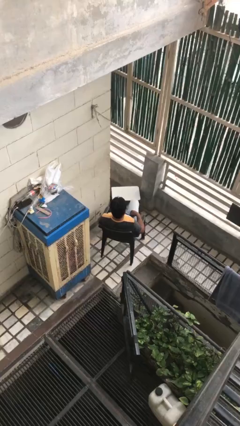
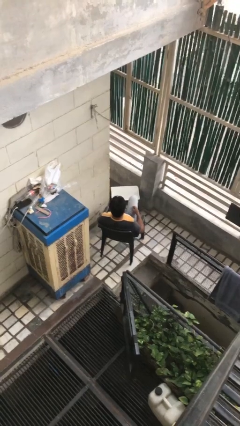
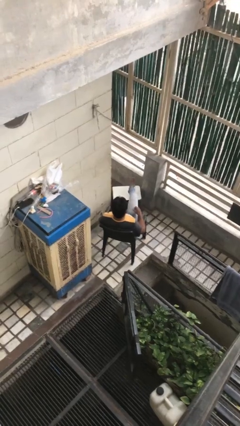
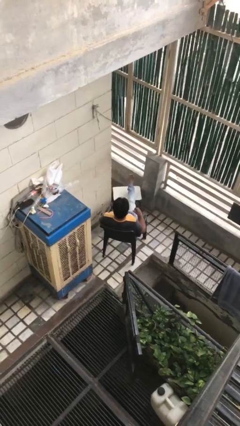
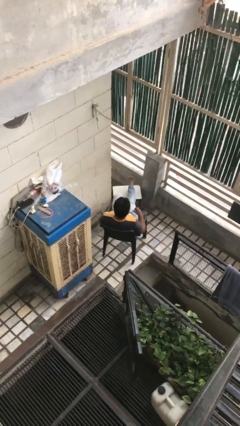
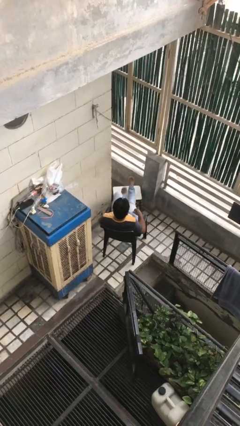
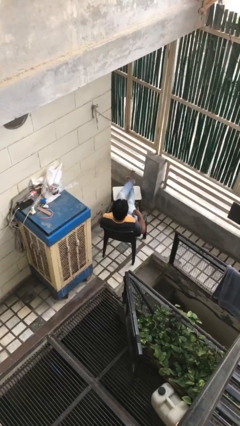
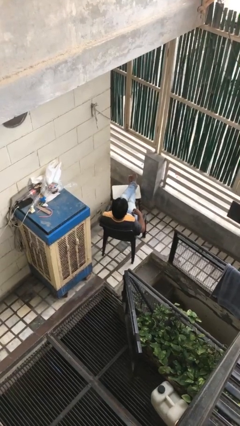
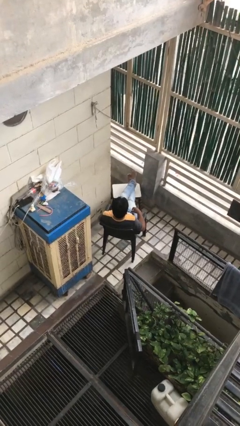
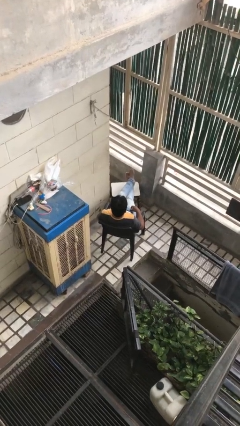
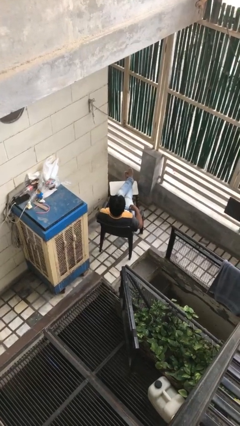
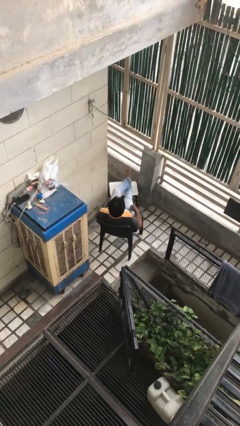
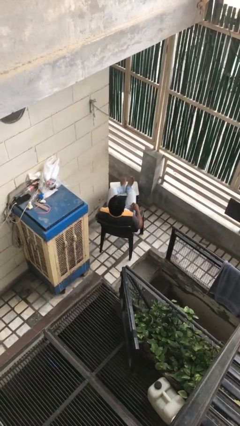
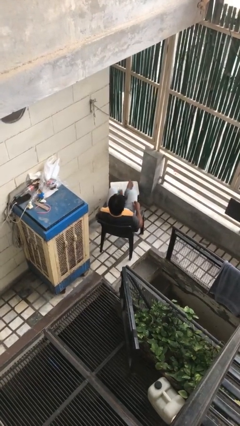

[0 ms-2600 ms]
person puts feet up

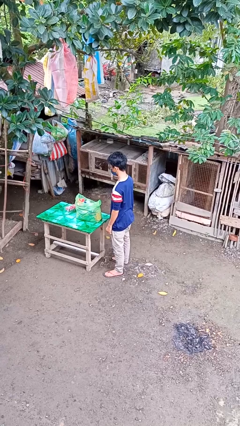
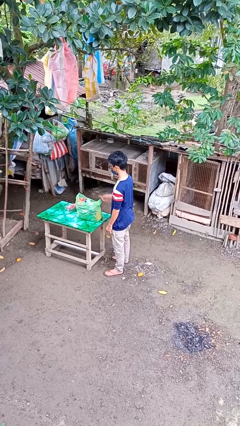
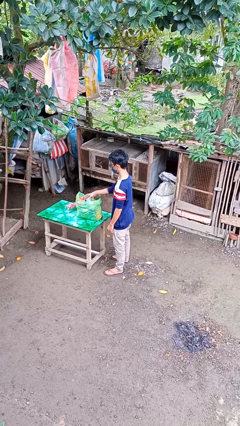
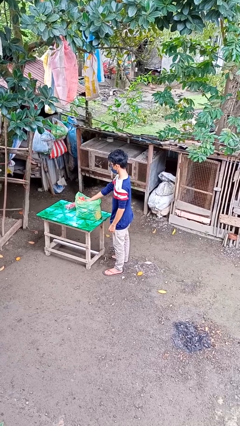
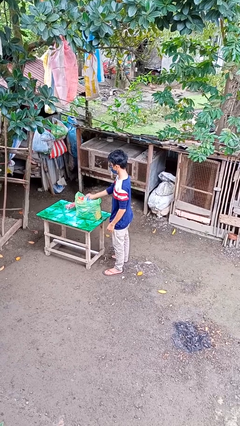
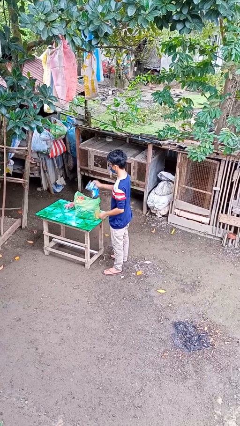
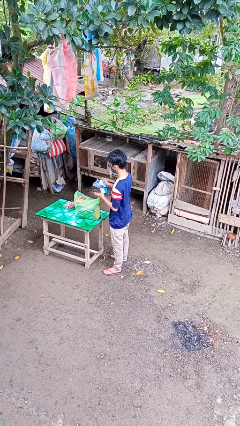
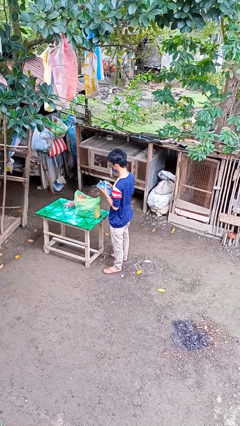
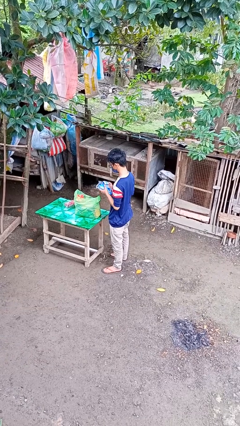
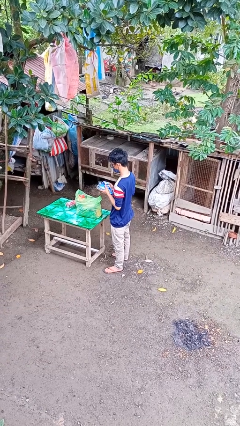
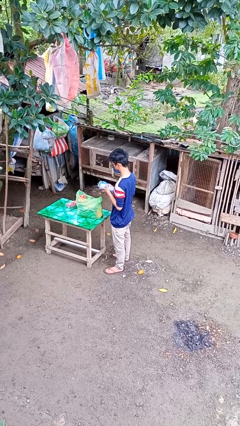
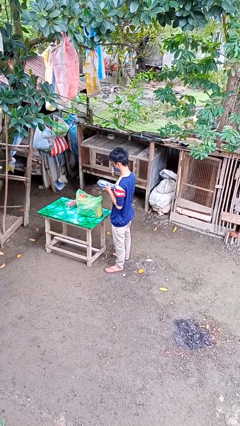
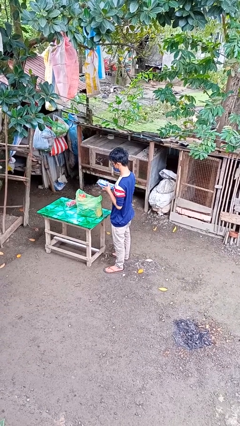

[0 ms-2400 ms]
person takes object from bag

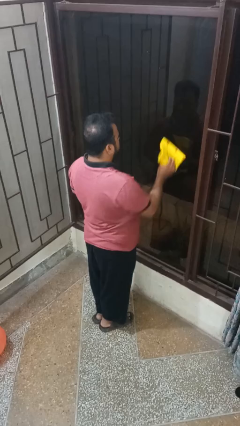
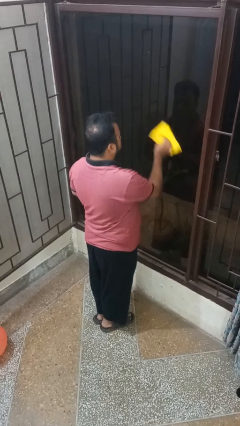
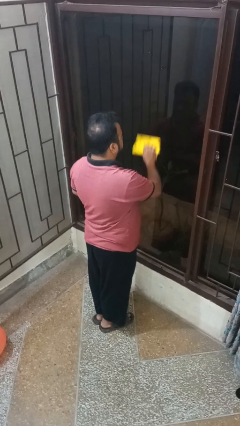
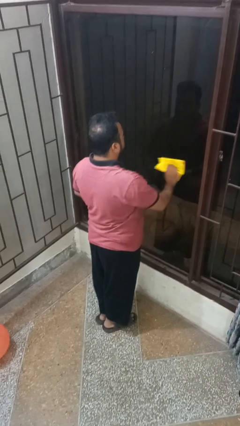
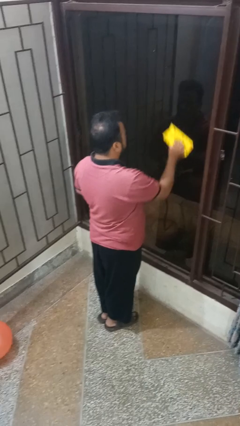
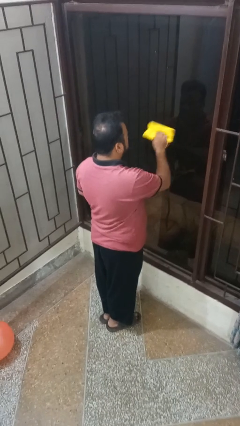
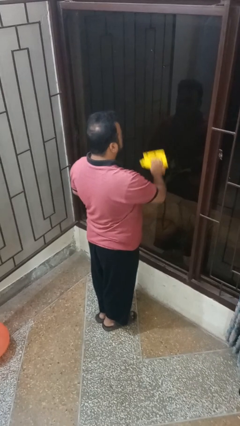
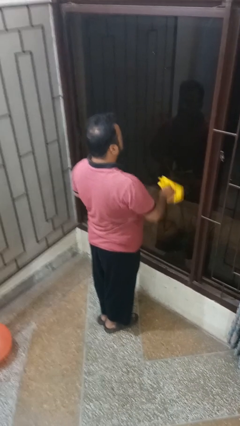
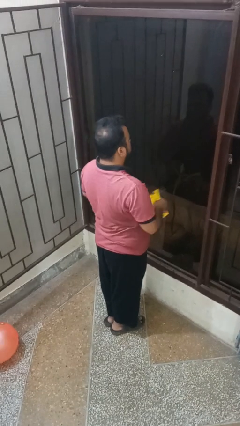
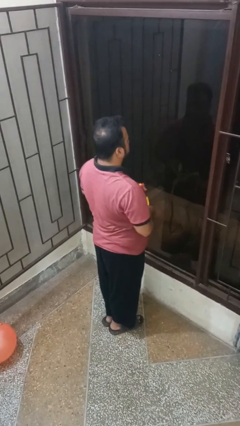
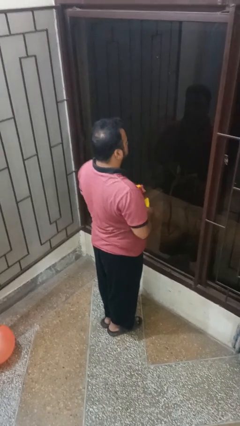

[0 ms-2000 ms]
person washes window

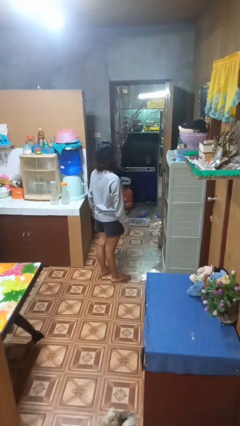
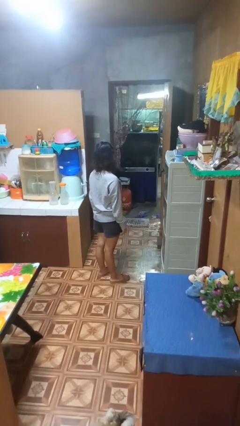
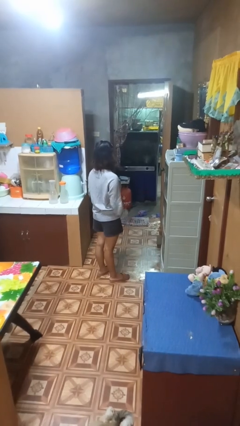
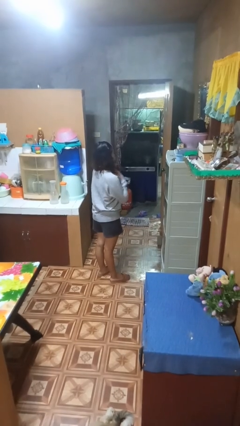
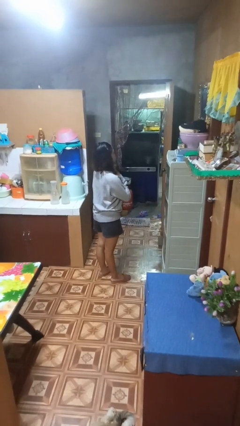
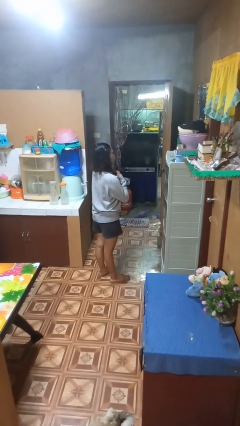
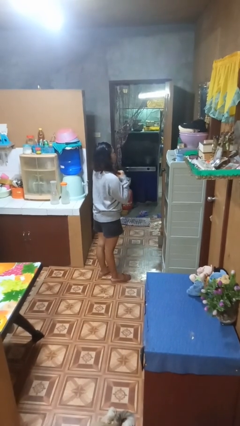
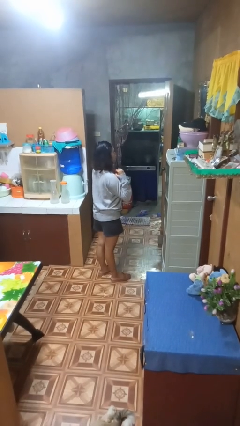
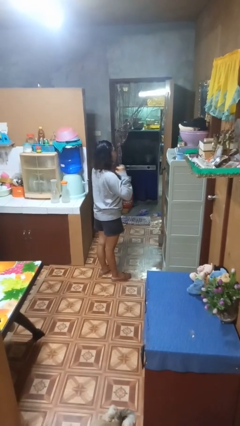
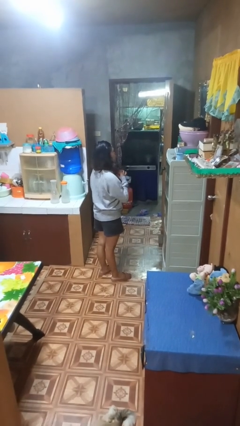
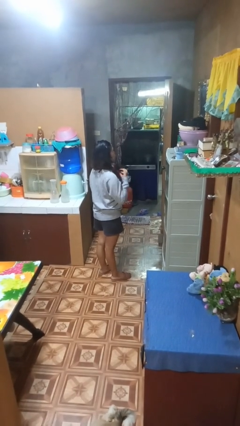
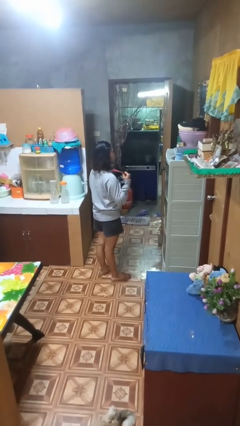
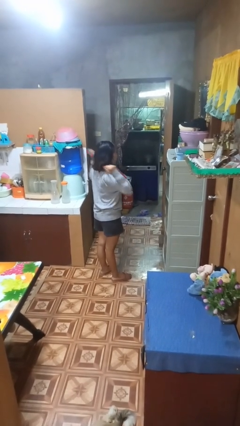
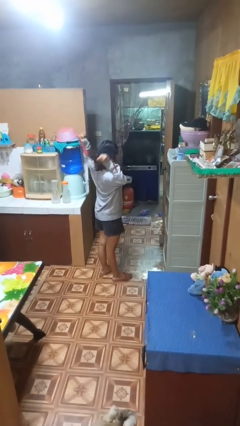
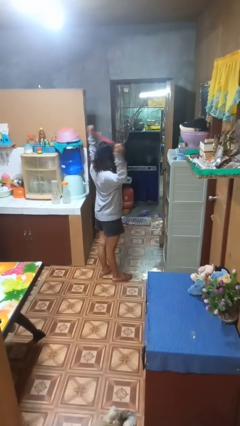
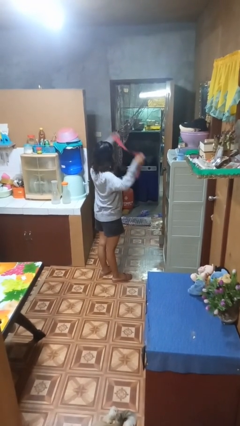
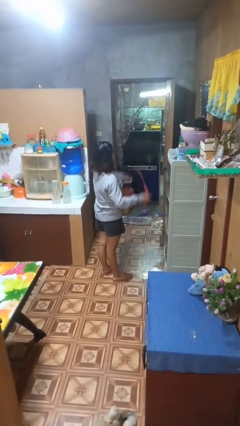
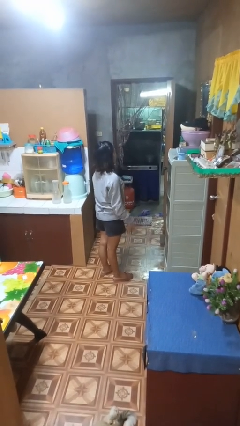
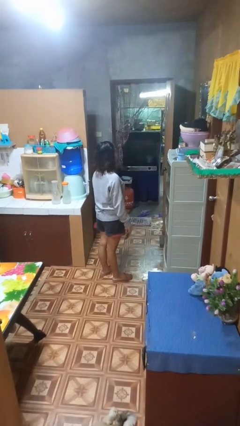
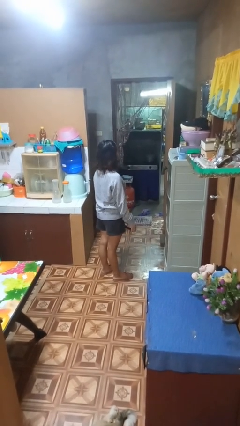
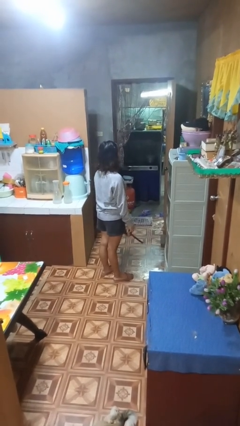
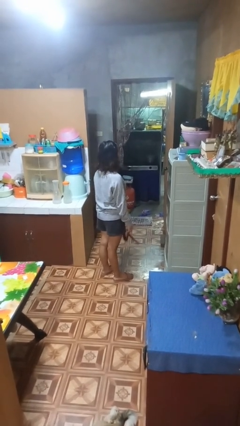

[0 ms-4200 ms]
person takes off necktie

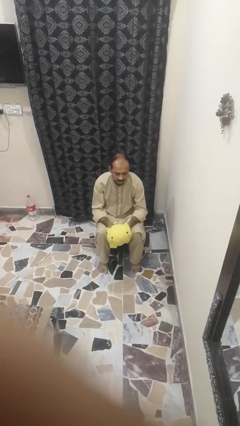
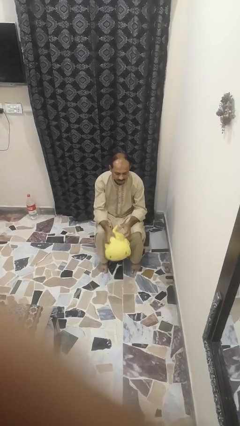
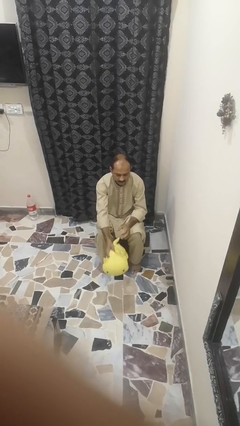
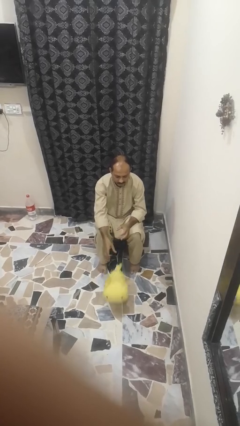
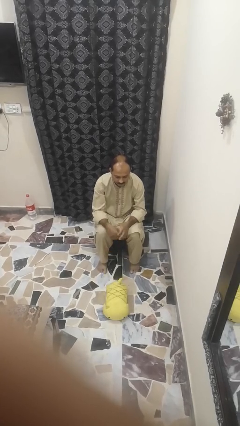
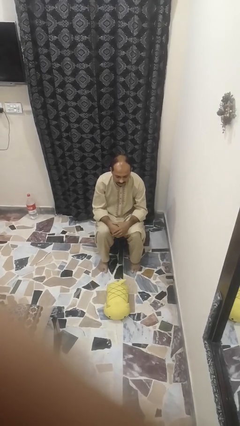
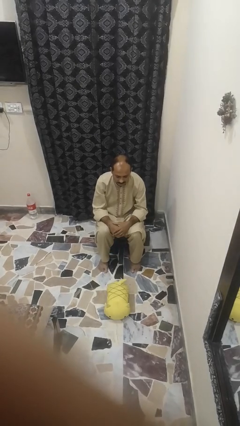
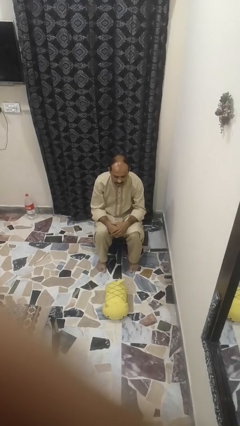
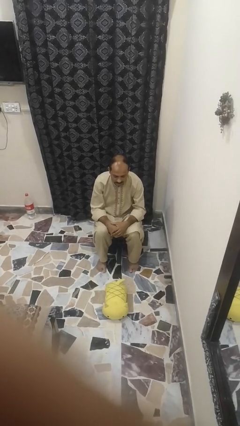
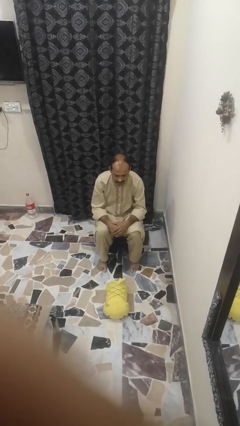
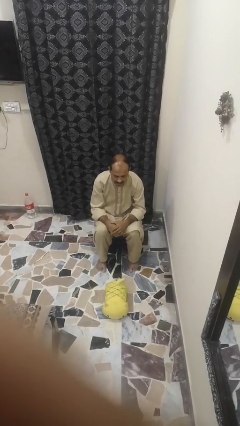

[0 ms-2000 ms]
person drops object

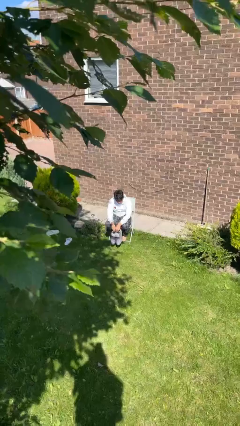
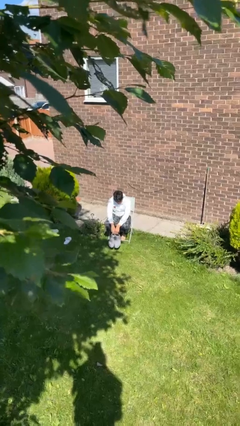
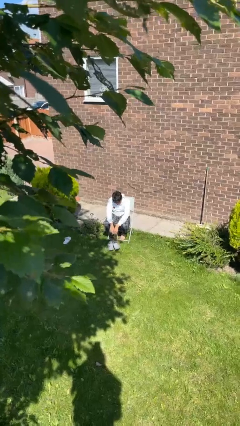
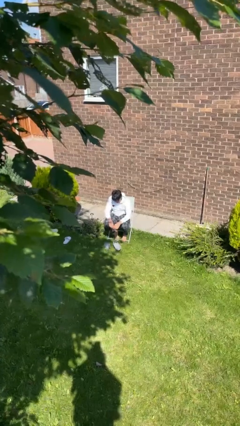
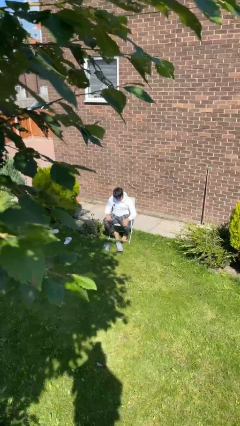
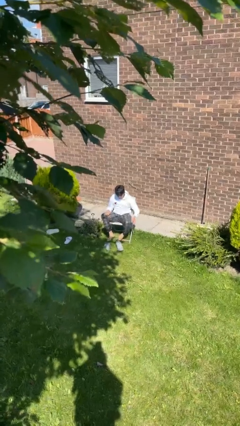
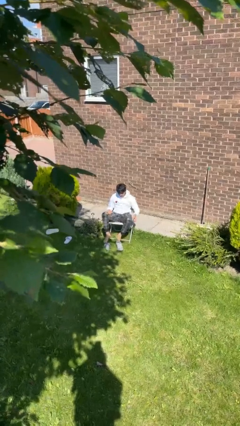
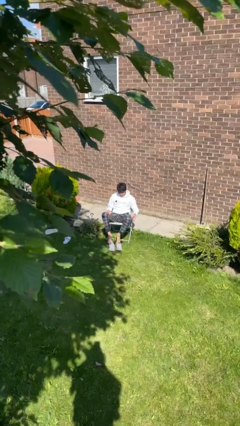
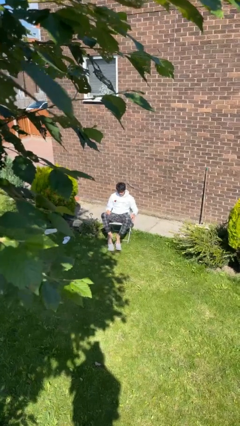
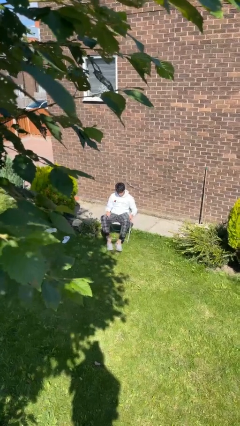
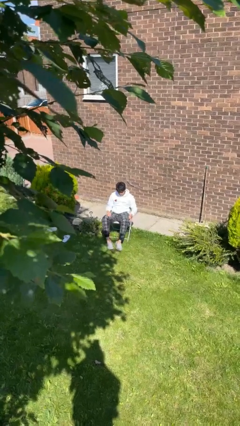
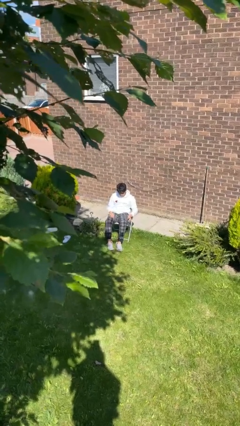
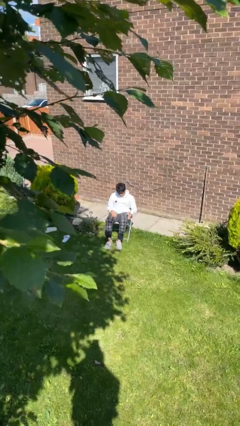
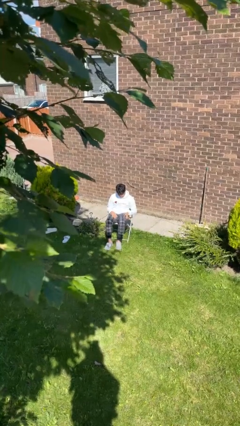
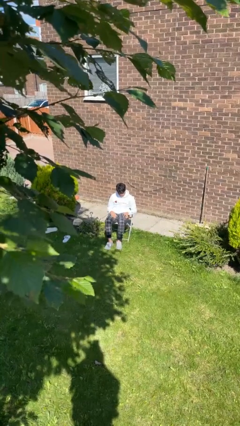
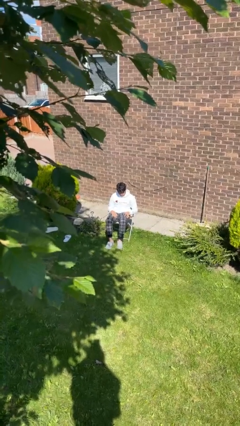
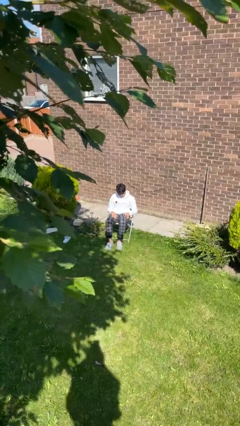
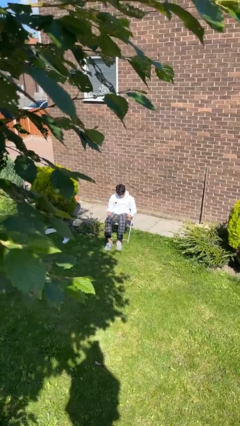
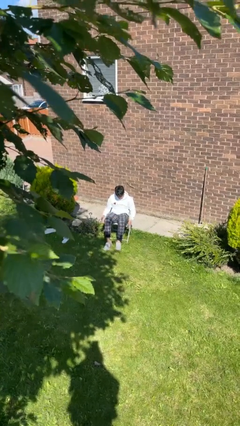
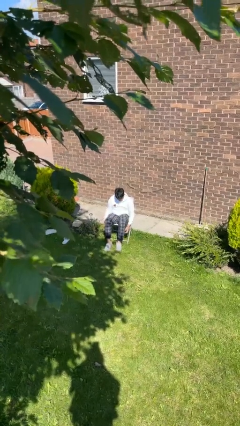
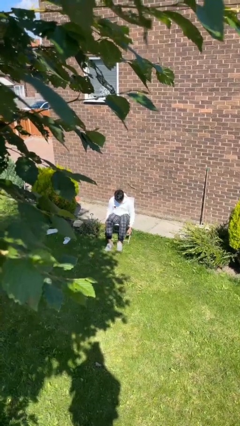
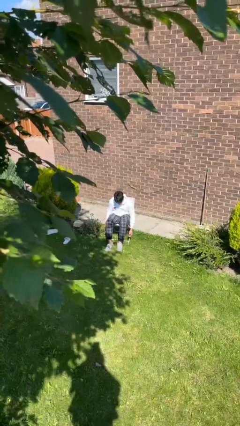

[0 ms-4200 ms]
person puts on shoes
